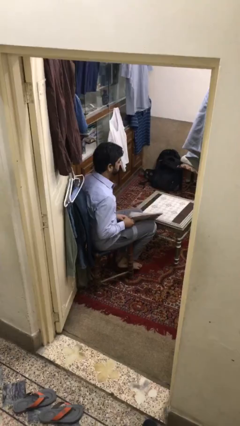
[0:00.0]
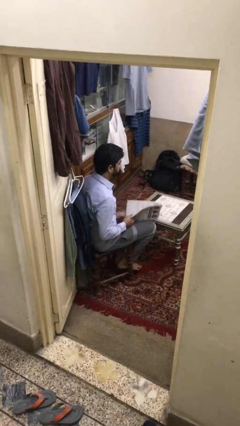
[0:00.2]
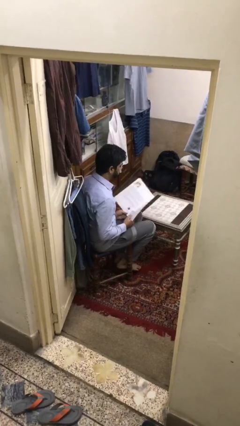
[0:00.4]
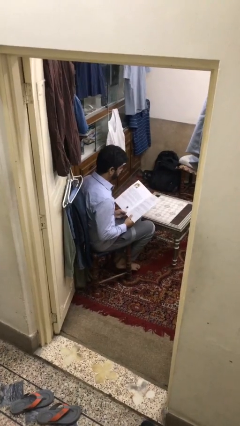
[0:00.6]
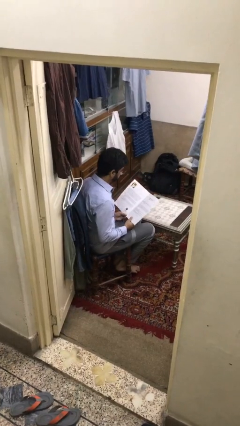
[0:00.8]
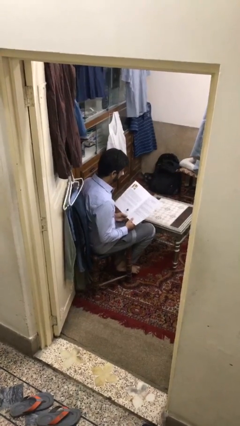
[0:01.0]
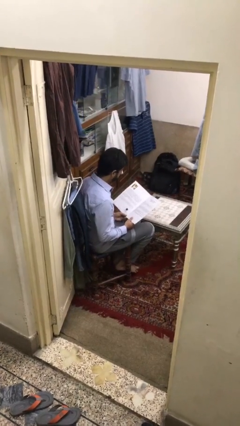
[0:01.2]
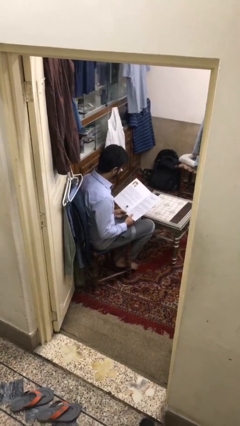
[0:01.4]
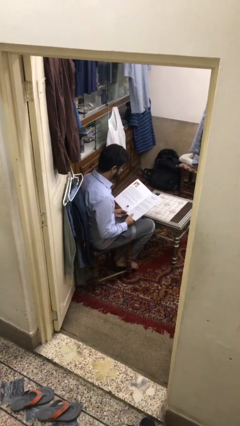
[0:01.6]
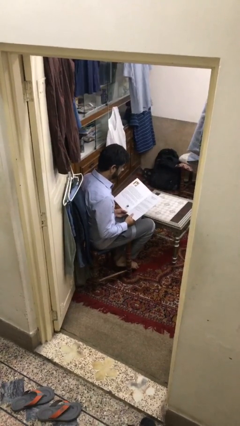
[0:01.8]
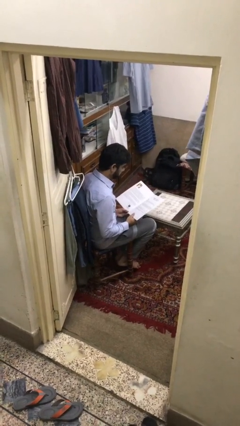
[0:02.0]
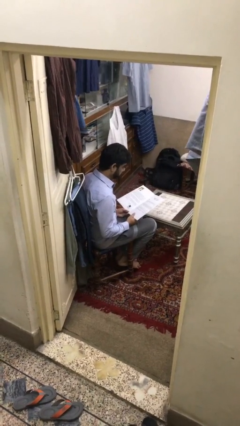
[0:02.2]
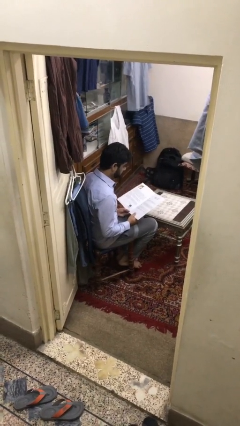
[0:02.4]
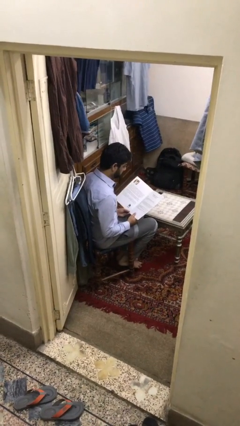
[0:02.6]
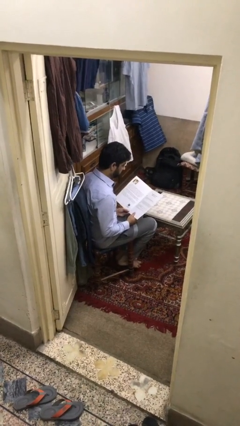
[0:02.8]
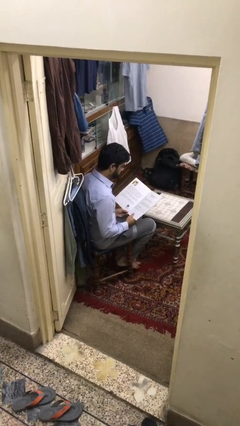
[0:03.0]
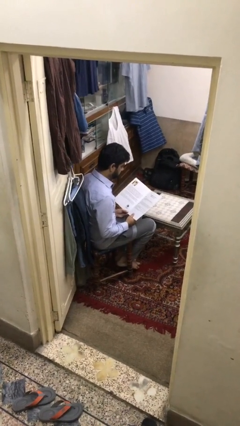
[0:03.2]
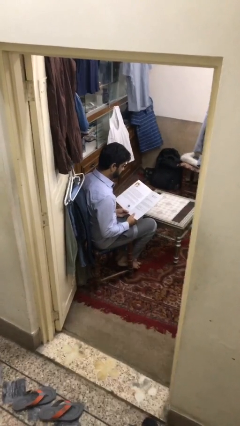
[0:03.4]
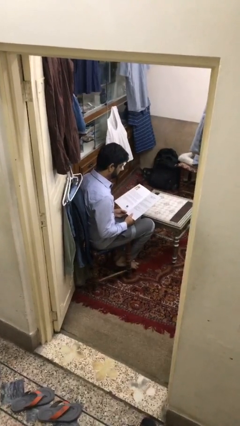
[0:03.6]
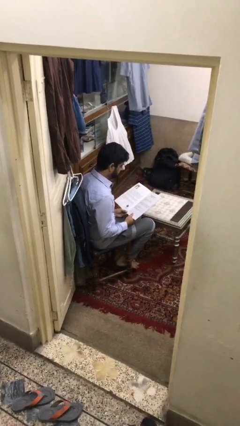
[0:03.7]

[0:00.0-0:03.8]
person reads document

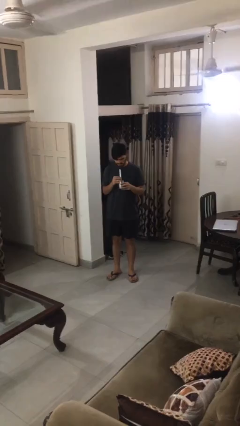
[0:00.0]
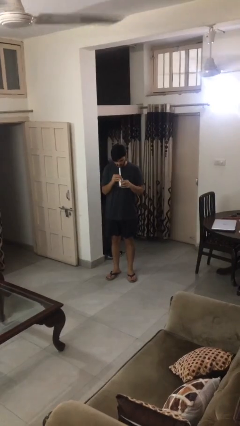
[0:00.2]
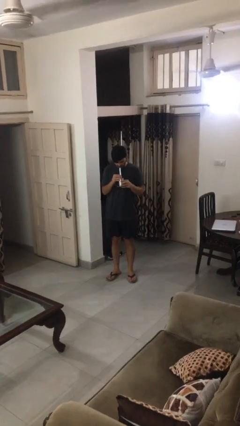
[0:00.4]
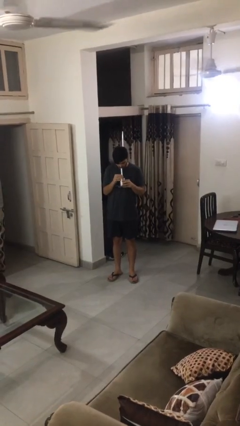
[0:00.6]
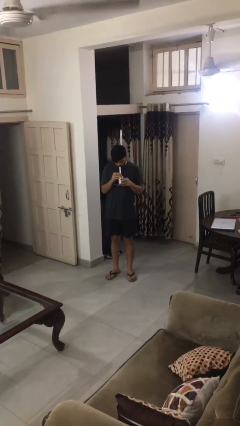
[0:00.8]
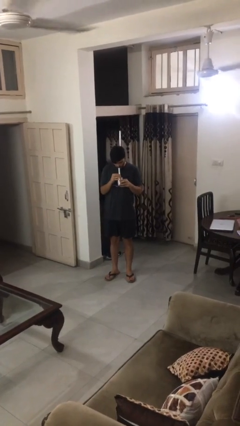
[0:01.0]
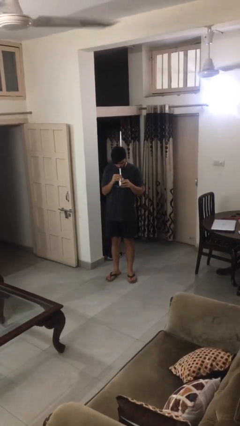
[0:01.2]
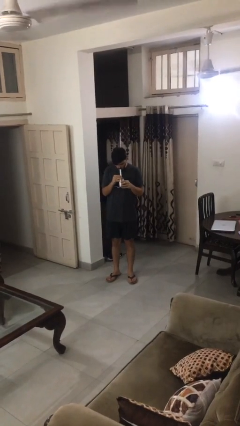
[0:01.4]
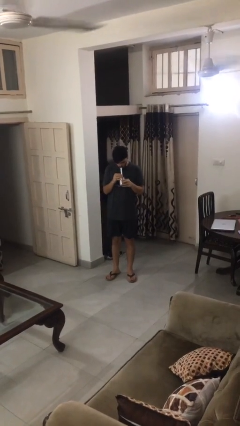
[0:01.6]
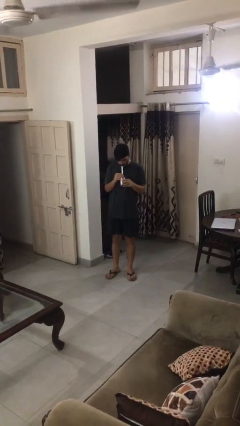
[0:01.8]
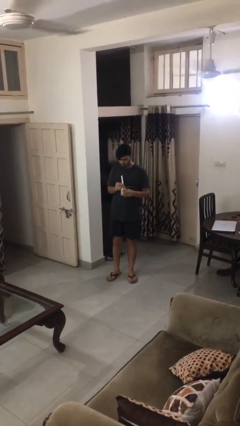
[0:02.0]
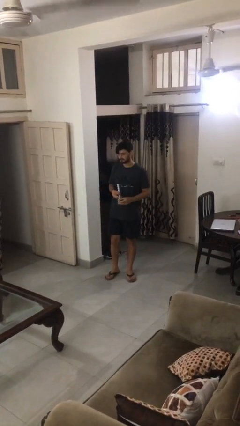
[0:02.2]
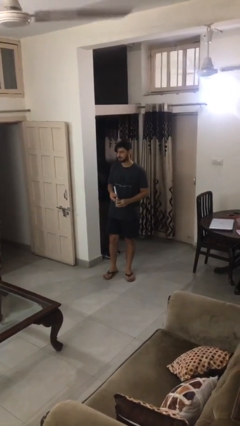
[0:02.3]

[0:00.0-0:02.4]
person drinks from straw

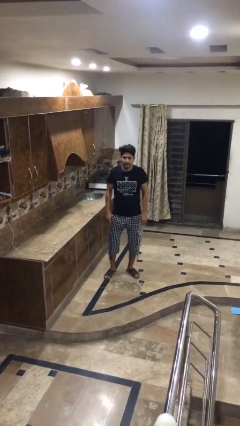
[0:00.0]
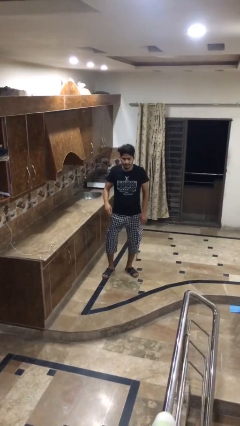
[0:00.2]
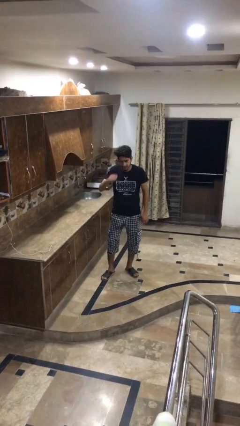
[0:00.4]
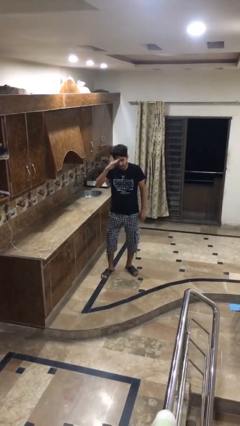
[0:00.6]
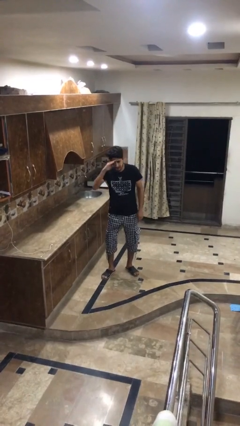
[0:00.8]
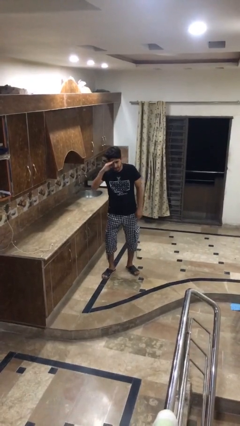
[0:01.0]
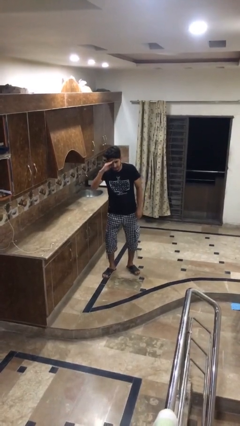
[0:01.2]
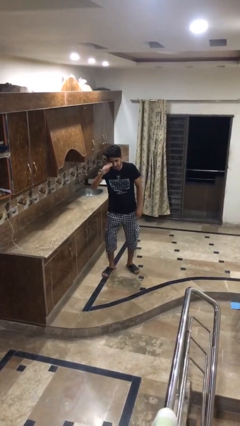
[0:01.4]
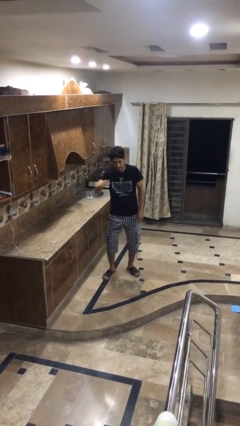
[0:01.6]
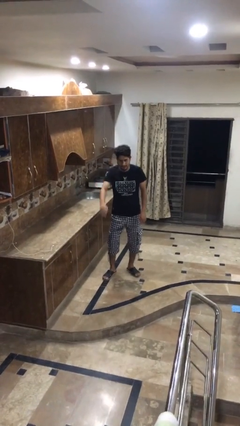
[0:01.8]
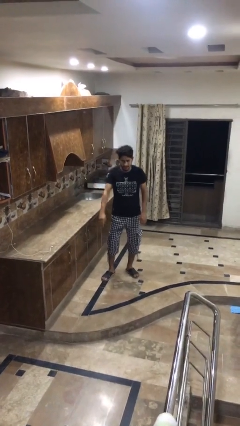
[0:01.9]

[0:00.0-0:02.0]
person salutes

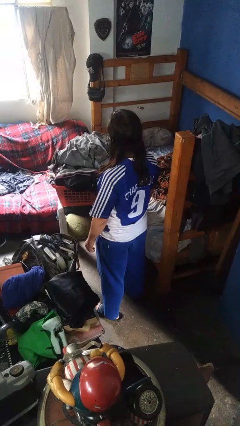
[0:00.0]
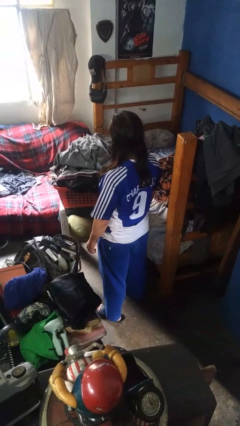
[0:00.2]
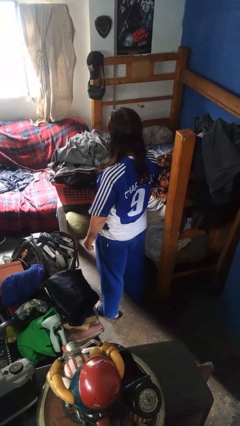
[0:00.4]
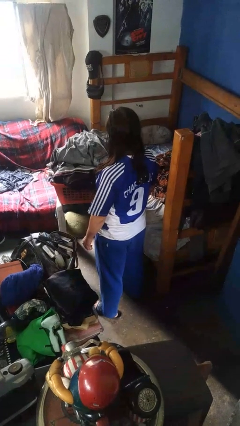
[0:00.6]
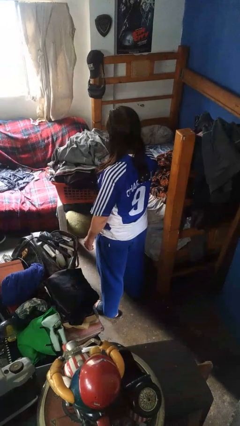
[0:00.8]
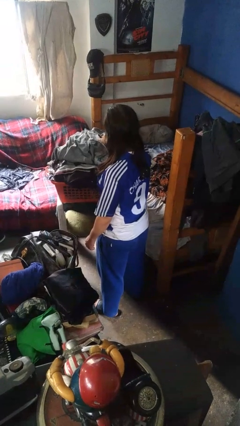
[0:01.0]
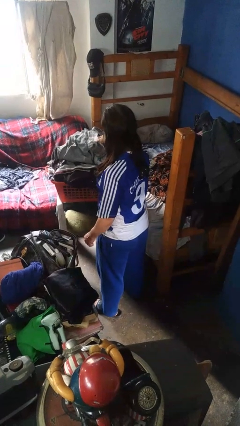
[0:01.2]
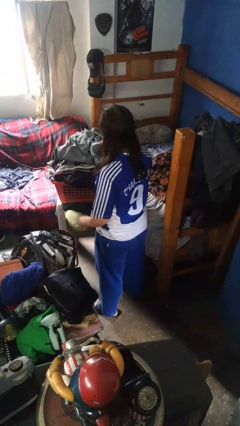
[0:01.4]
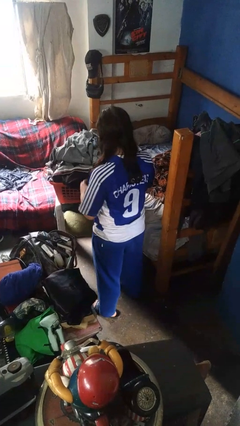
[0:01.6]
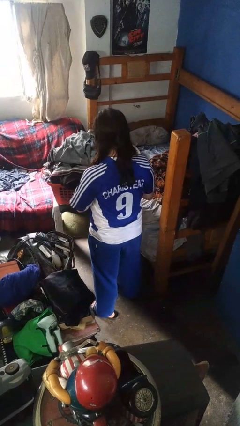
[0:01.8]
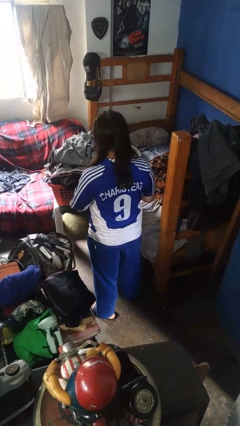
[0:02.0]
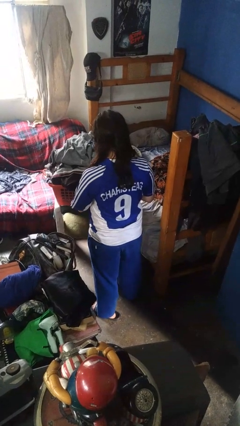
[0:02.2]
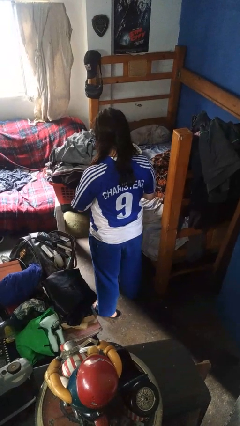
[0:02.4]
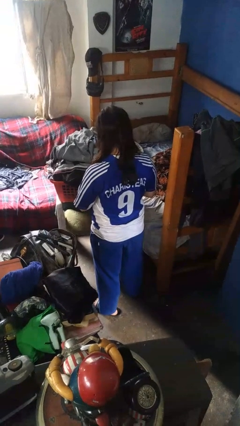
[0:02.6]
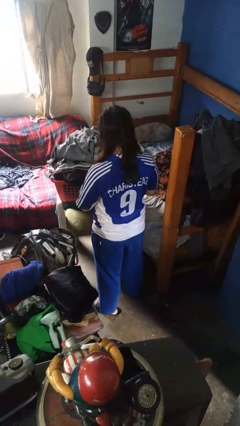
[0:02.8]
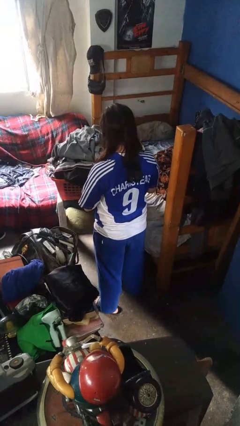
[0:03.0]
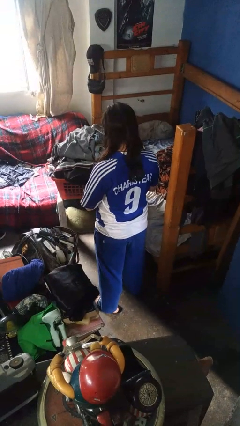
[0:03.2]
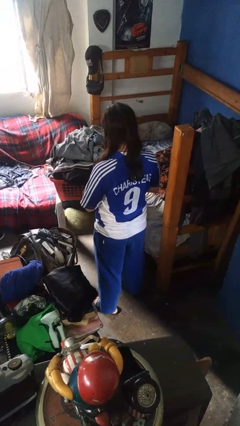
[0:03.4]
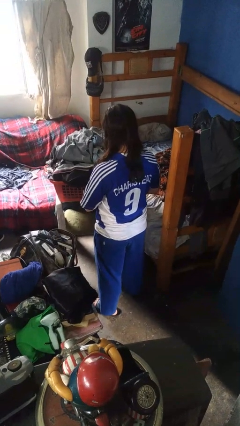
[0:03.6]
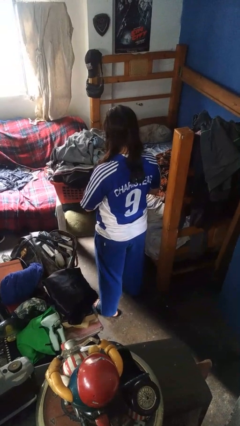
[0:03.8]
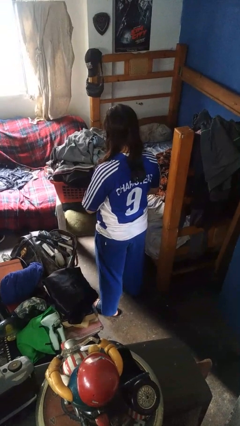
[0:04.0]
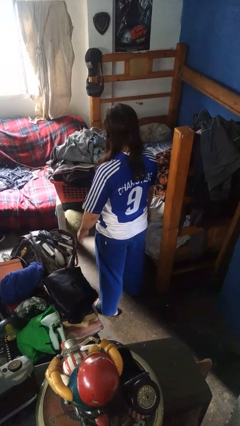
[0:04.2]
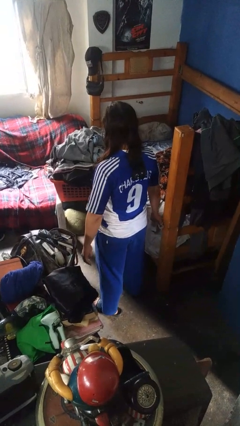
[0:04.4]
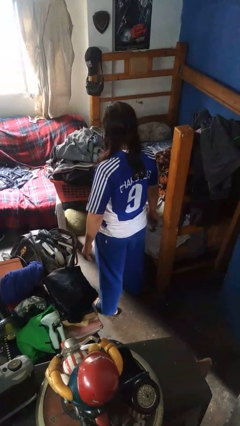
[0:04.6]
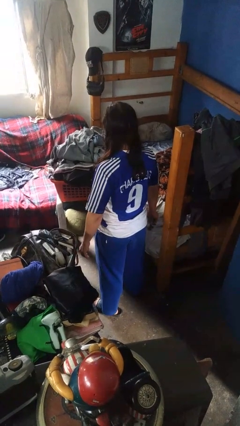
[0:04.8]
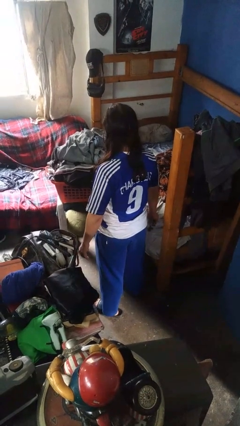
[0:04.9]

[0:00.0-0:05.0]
person folds socks

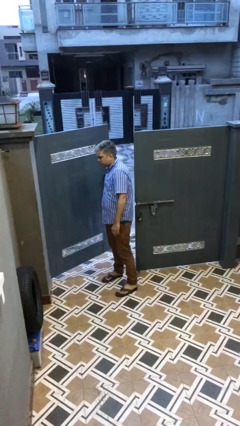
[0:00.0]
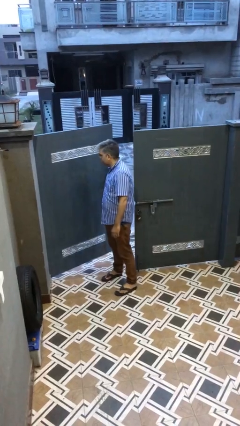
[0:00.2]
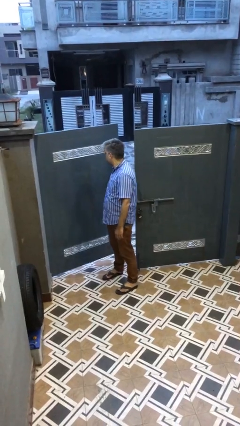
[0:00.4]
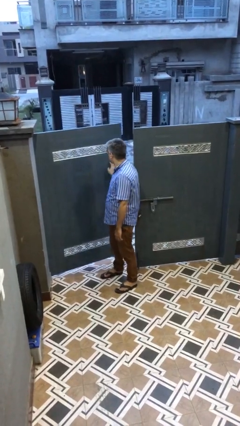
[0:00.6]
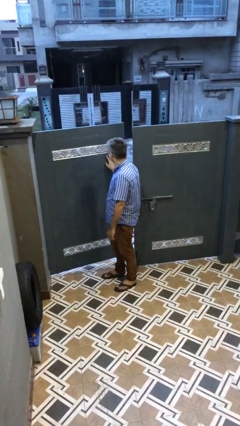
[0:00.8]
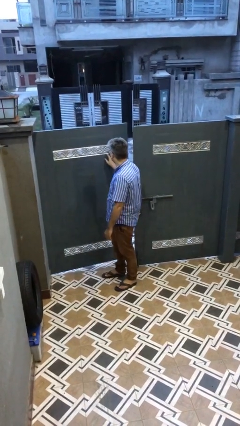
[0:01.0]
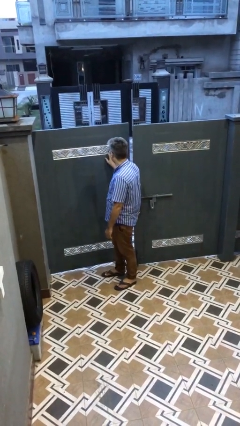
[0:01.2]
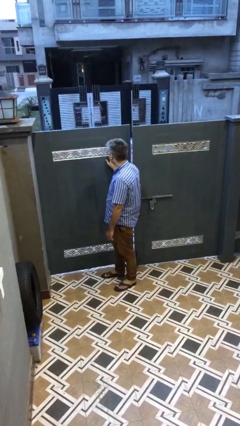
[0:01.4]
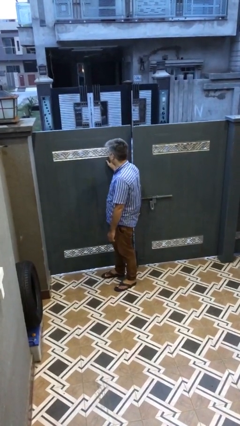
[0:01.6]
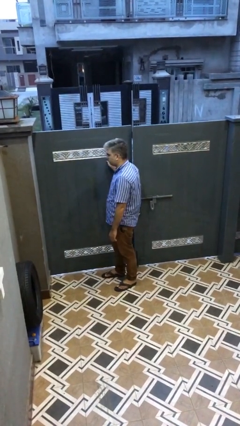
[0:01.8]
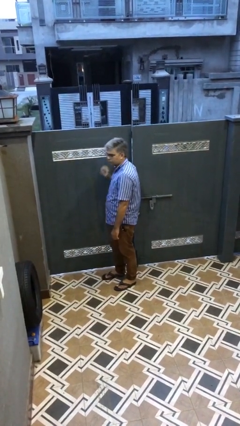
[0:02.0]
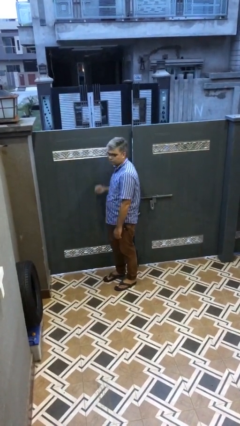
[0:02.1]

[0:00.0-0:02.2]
person closes facility door

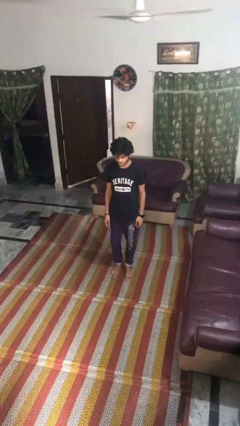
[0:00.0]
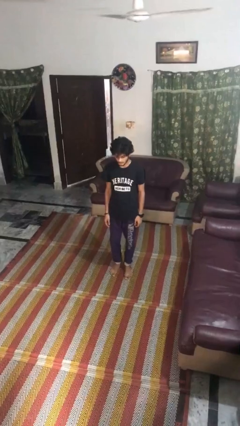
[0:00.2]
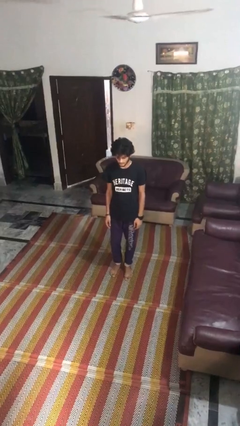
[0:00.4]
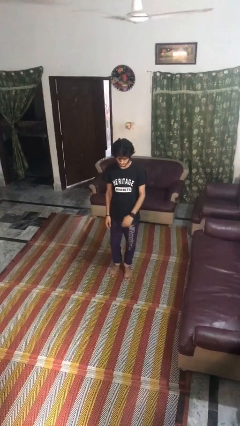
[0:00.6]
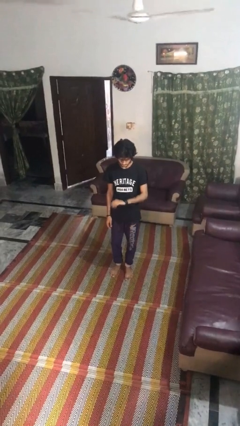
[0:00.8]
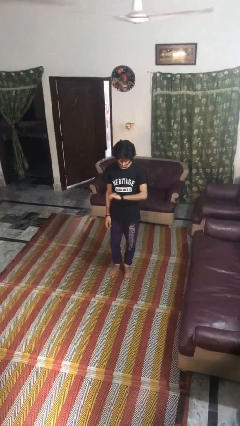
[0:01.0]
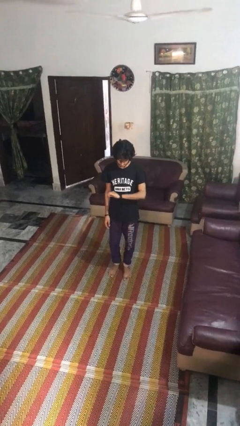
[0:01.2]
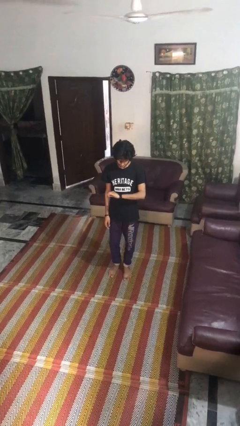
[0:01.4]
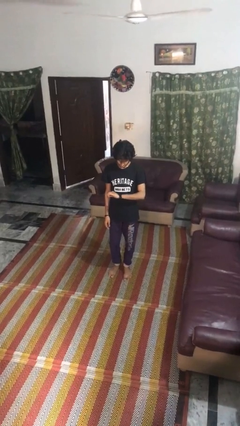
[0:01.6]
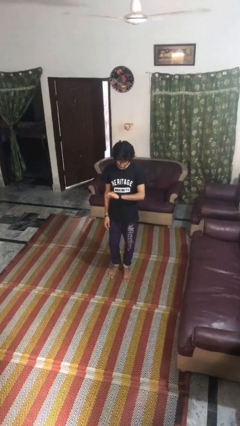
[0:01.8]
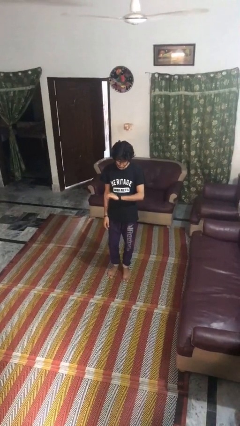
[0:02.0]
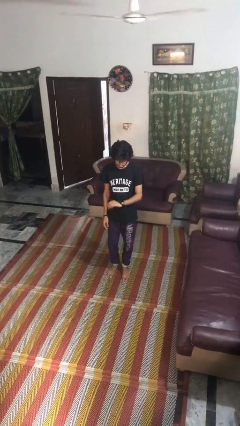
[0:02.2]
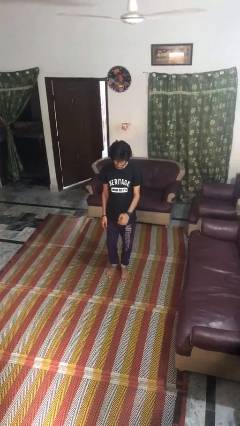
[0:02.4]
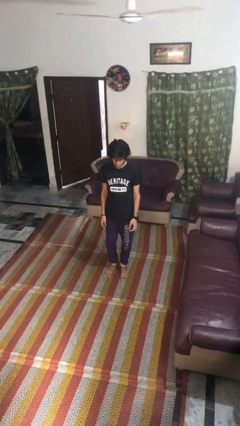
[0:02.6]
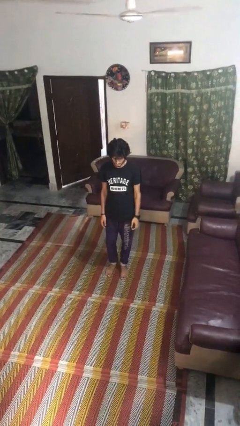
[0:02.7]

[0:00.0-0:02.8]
person looks at wristwatch
